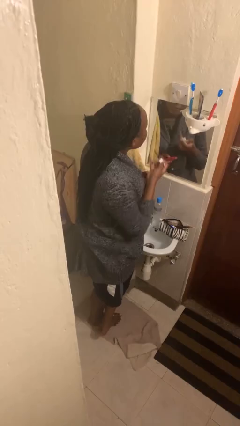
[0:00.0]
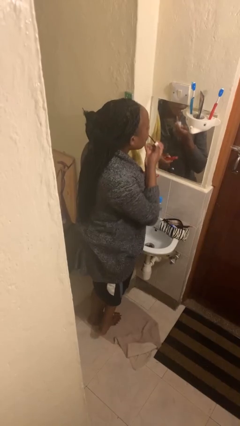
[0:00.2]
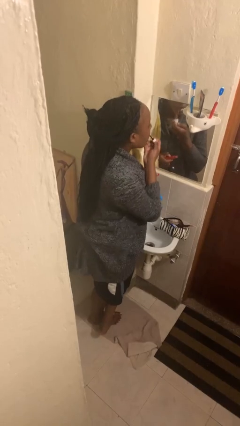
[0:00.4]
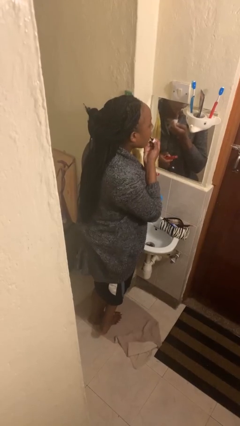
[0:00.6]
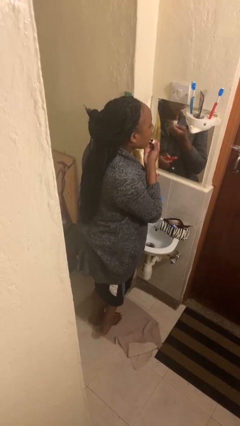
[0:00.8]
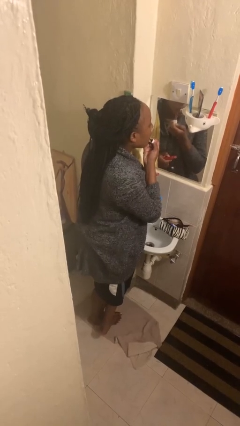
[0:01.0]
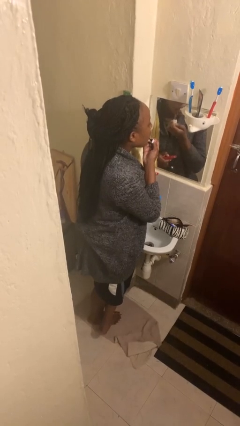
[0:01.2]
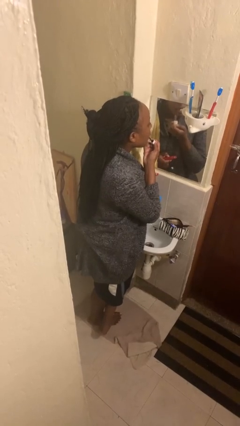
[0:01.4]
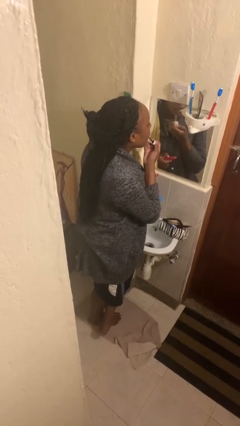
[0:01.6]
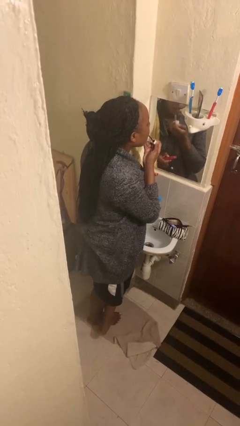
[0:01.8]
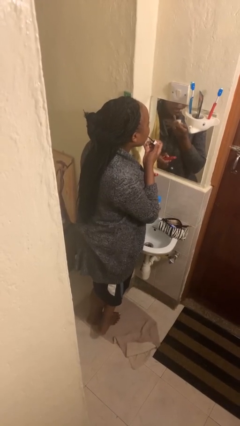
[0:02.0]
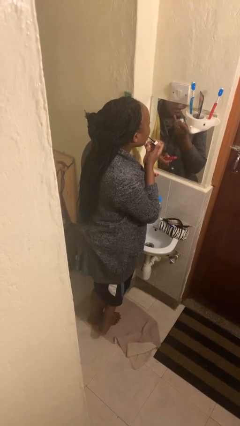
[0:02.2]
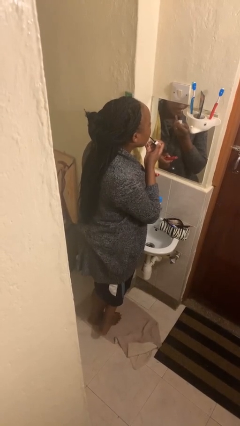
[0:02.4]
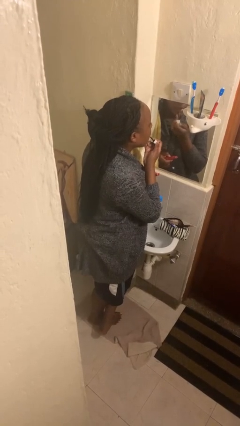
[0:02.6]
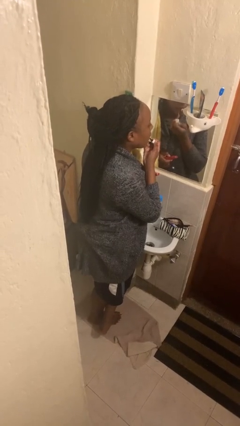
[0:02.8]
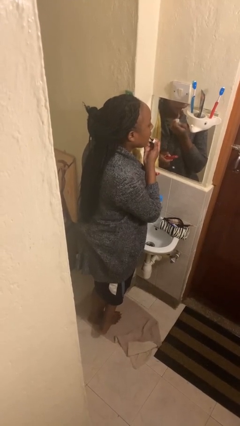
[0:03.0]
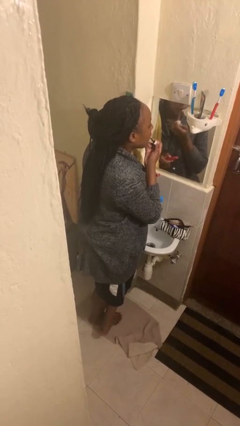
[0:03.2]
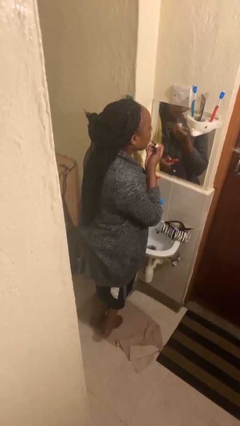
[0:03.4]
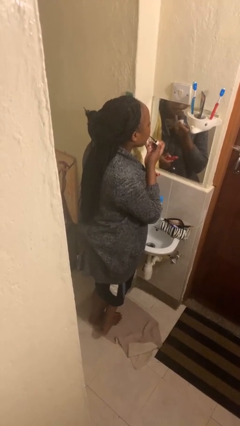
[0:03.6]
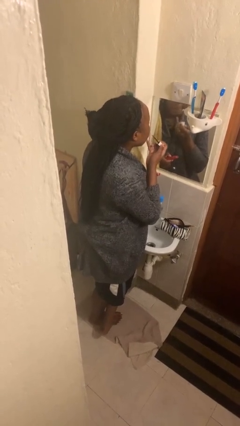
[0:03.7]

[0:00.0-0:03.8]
person applies lip makeup

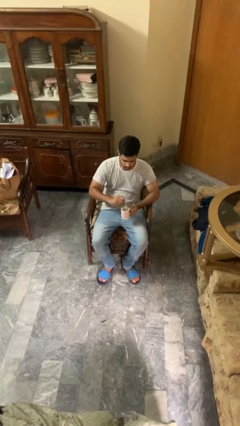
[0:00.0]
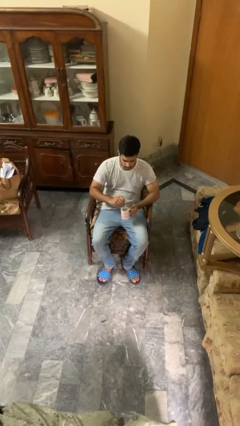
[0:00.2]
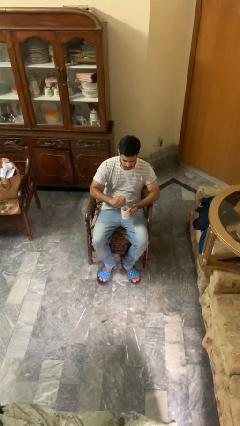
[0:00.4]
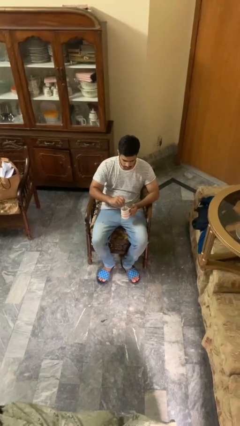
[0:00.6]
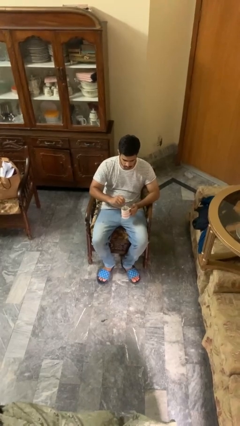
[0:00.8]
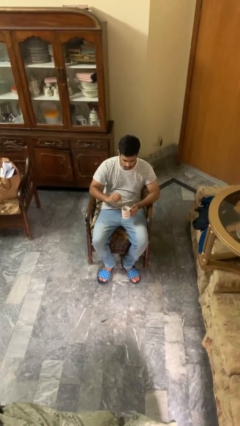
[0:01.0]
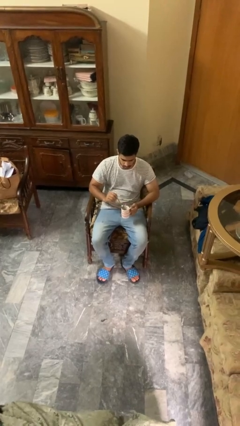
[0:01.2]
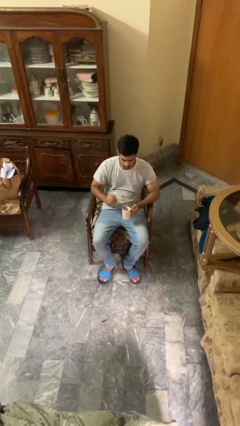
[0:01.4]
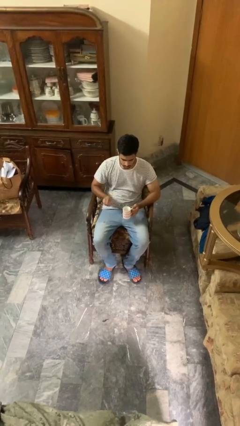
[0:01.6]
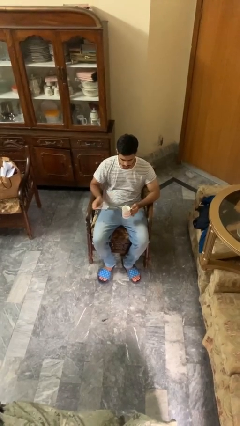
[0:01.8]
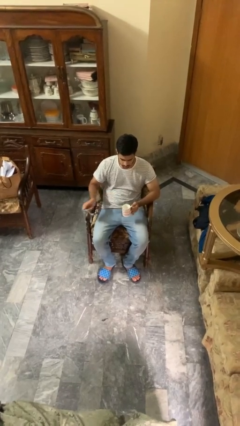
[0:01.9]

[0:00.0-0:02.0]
person stirs mug

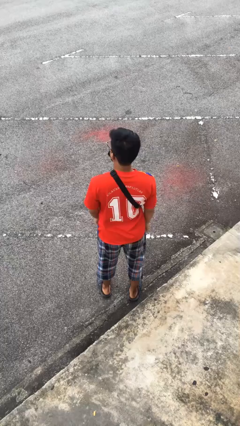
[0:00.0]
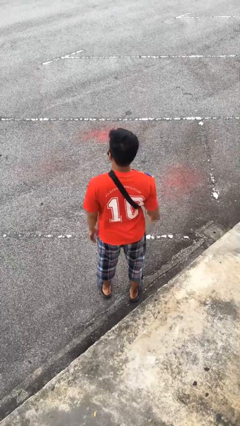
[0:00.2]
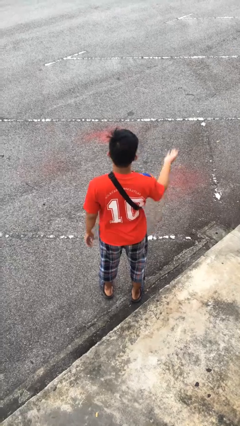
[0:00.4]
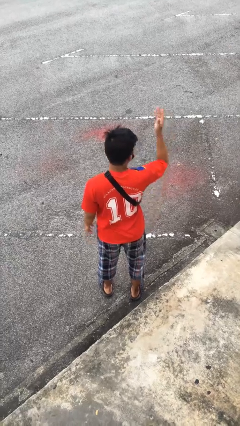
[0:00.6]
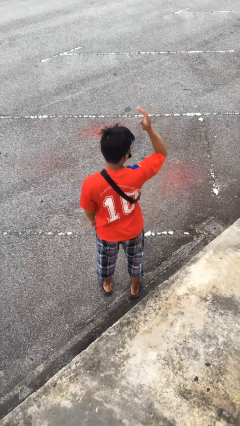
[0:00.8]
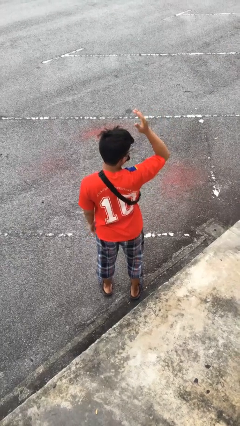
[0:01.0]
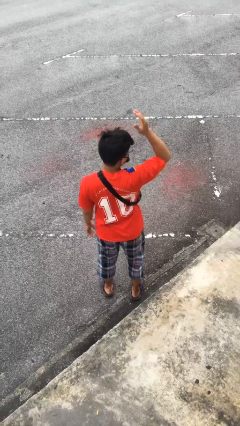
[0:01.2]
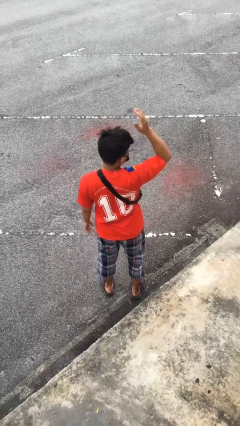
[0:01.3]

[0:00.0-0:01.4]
person gestures swipe up

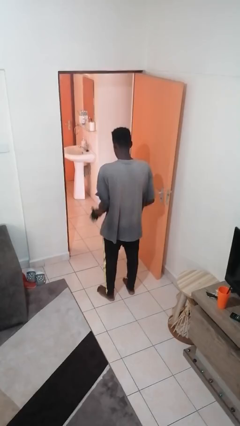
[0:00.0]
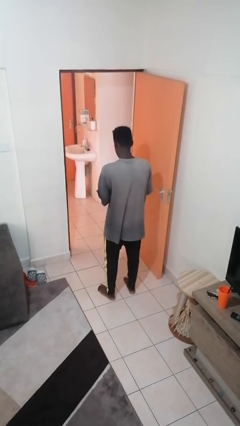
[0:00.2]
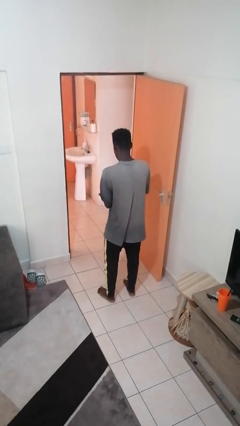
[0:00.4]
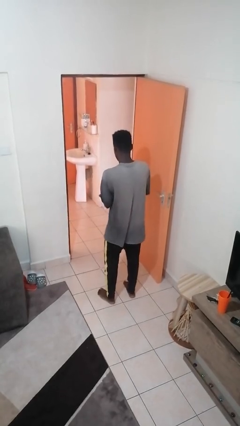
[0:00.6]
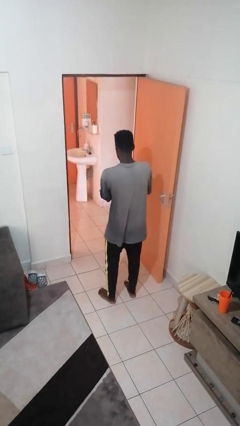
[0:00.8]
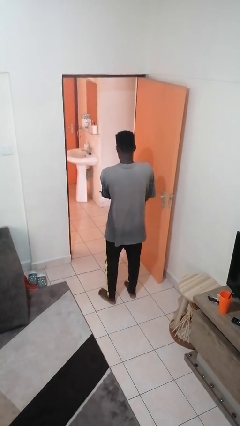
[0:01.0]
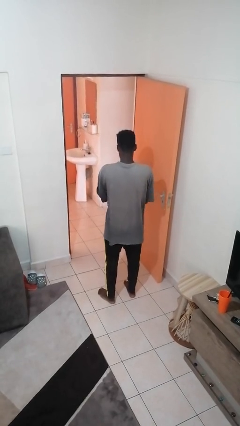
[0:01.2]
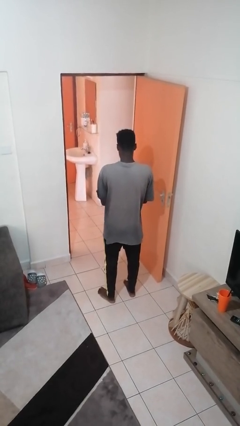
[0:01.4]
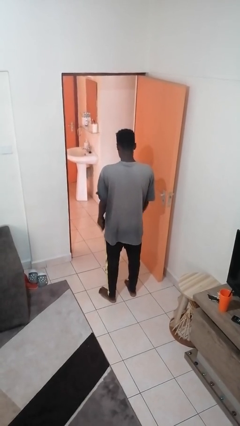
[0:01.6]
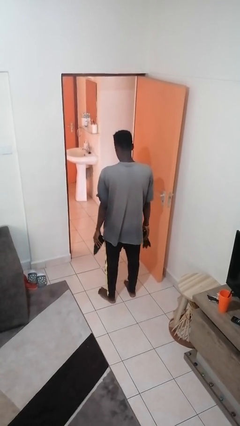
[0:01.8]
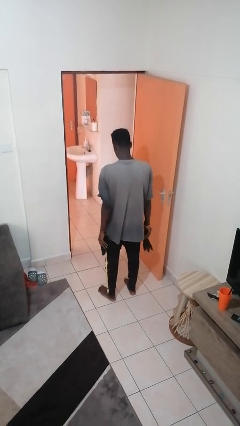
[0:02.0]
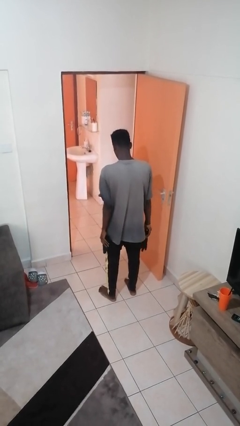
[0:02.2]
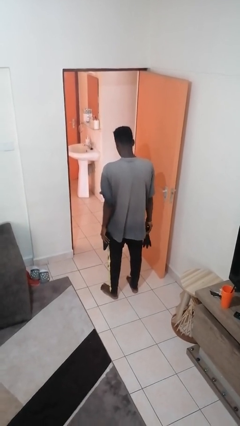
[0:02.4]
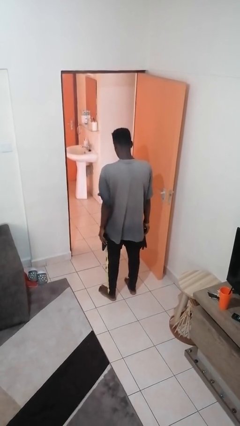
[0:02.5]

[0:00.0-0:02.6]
person takes off gloves

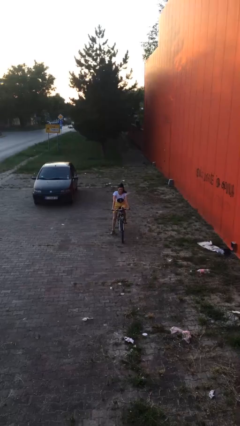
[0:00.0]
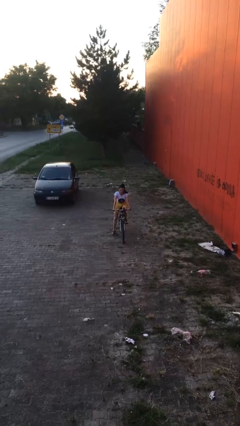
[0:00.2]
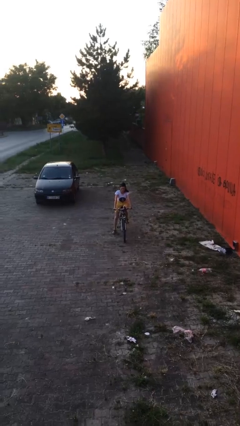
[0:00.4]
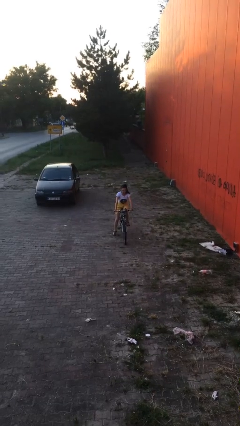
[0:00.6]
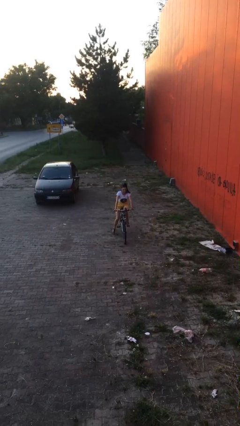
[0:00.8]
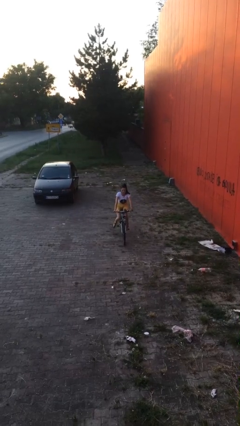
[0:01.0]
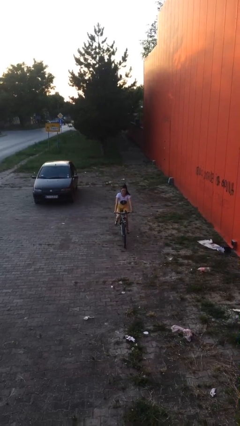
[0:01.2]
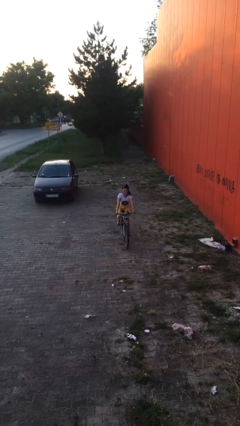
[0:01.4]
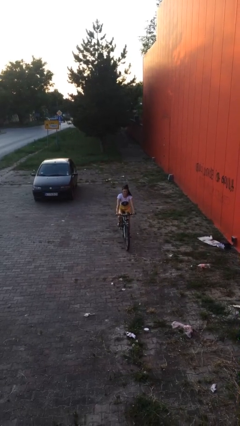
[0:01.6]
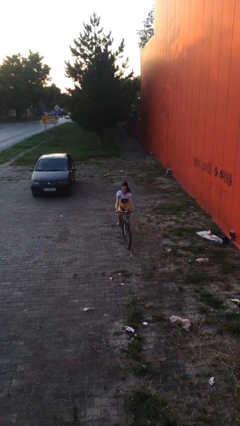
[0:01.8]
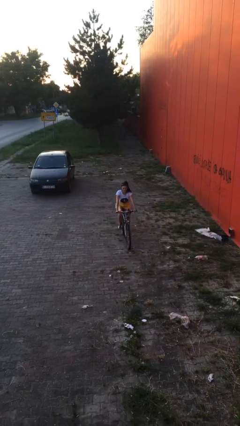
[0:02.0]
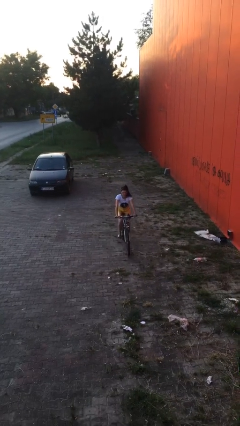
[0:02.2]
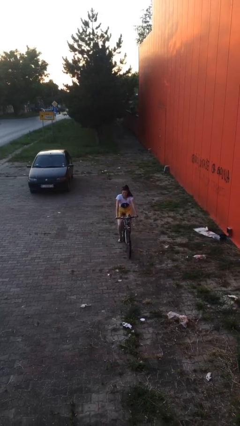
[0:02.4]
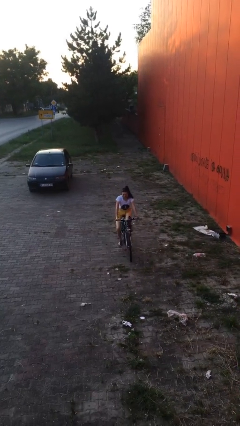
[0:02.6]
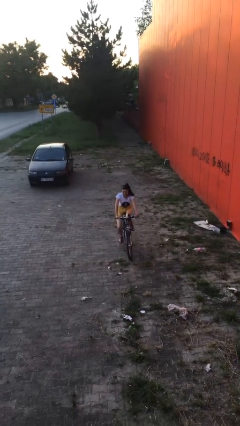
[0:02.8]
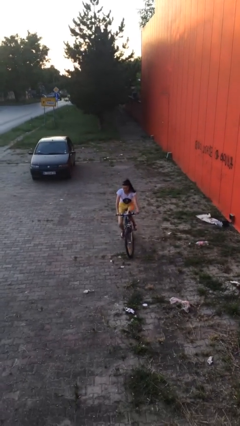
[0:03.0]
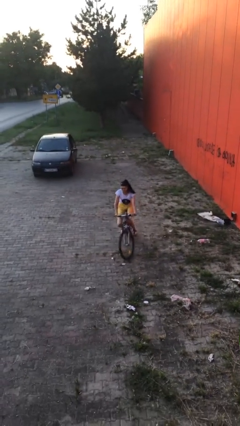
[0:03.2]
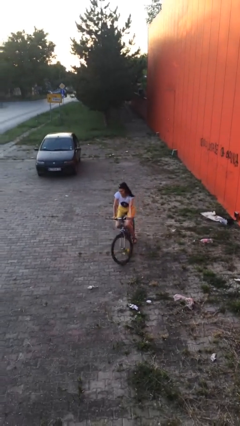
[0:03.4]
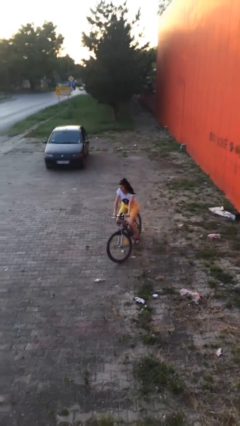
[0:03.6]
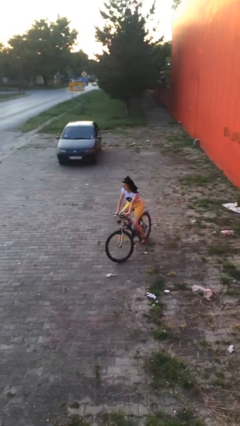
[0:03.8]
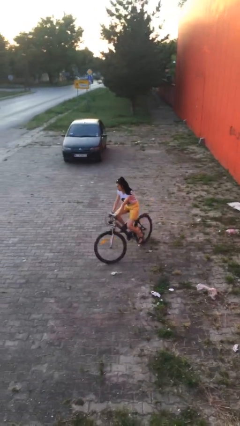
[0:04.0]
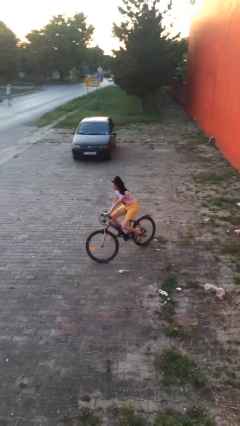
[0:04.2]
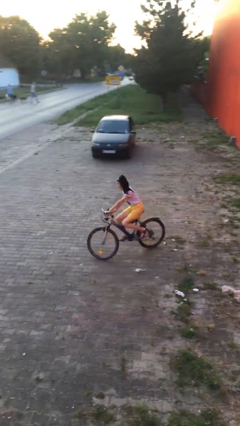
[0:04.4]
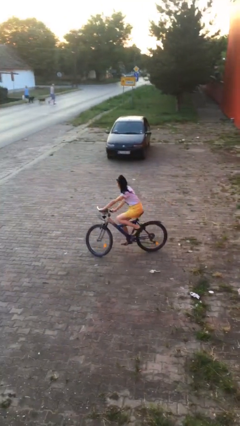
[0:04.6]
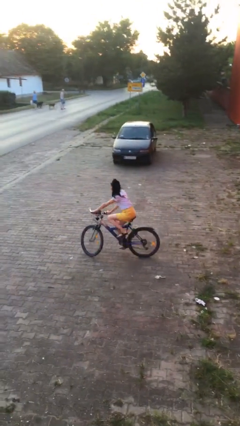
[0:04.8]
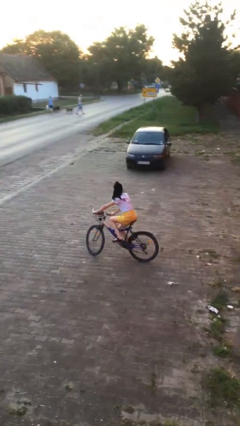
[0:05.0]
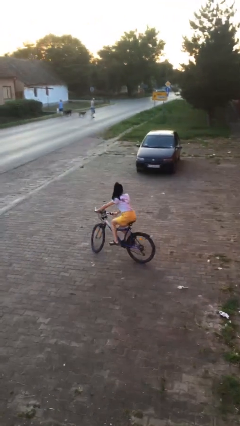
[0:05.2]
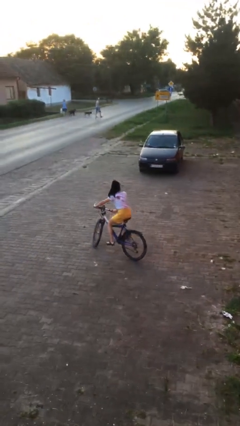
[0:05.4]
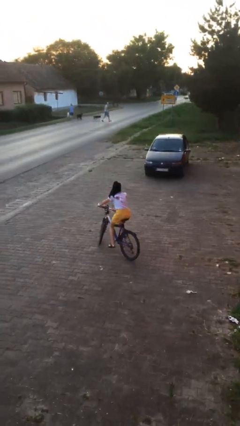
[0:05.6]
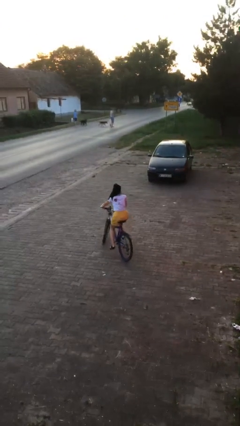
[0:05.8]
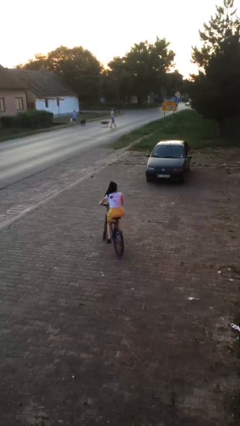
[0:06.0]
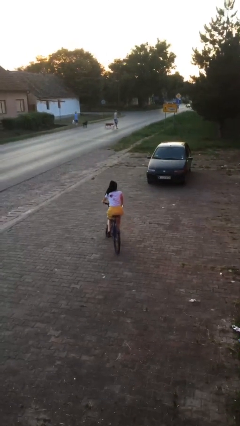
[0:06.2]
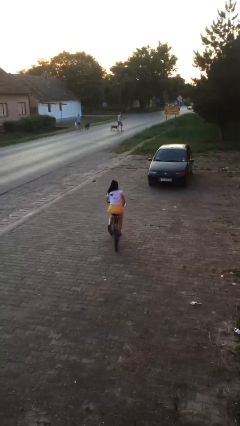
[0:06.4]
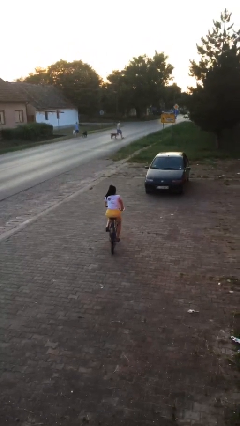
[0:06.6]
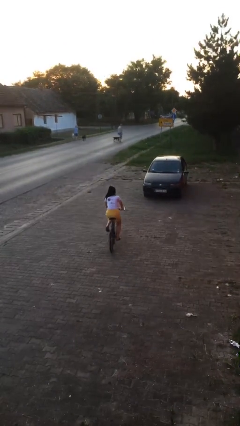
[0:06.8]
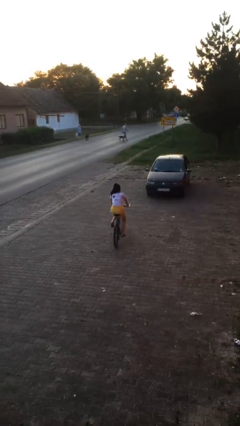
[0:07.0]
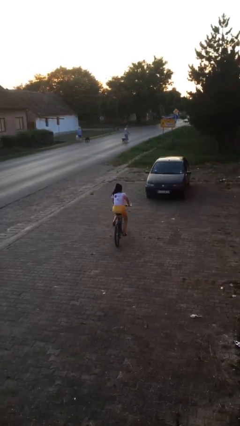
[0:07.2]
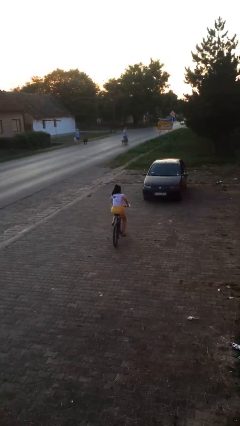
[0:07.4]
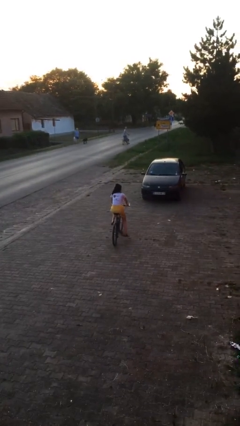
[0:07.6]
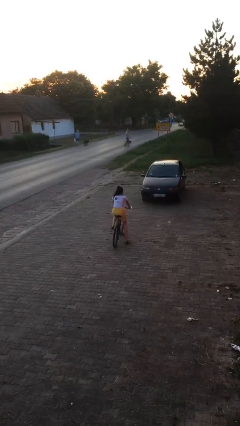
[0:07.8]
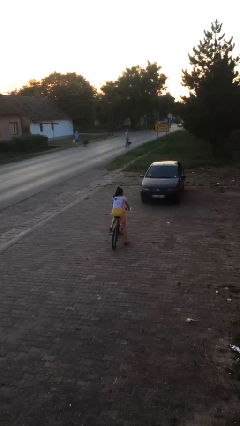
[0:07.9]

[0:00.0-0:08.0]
person rides bicycle
